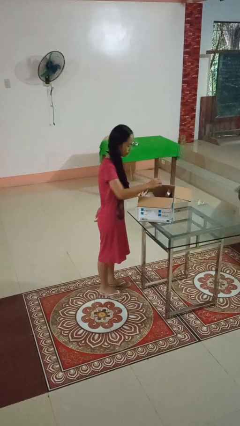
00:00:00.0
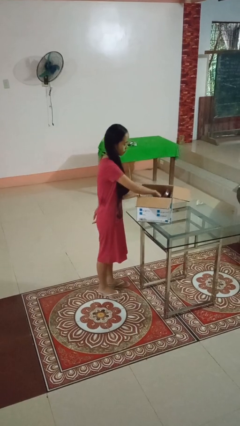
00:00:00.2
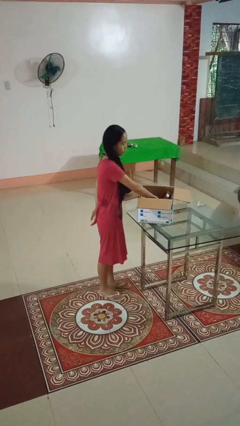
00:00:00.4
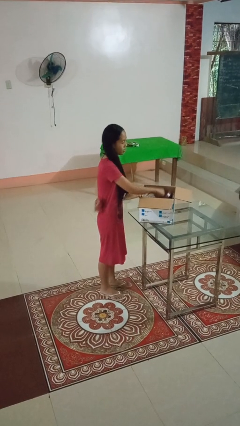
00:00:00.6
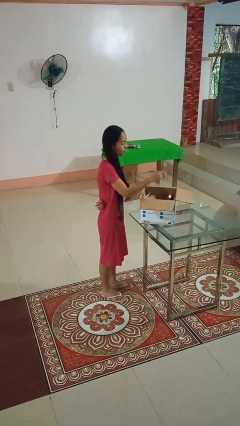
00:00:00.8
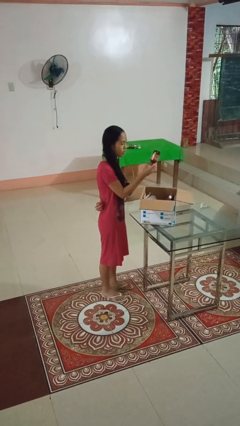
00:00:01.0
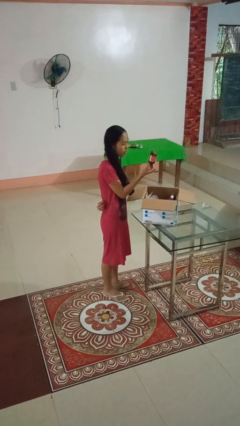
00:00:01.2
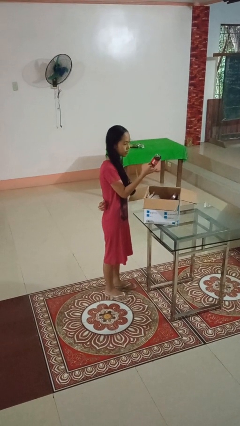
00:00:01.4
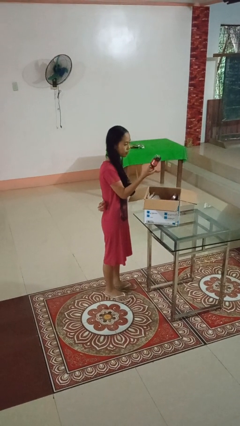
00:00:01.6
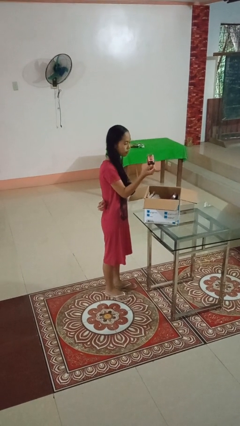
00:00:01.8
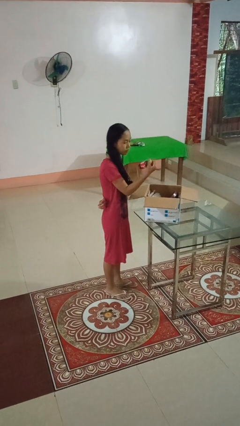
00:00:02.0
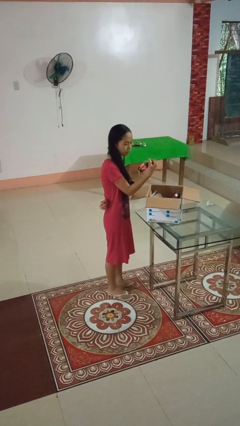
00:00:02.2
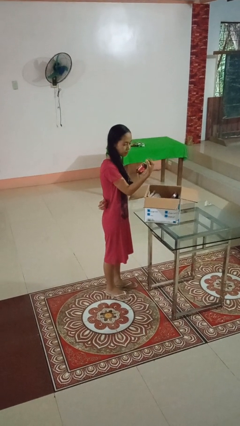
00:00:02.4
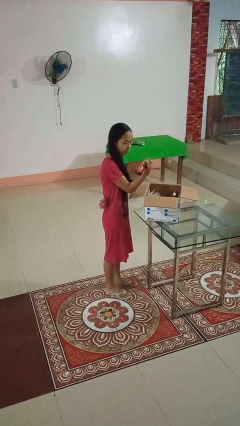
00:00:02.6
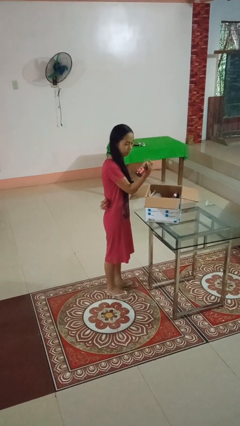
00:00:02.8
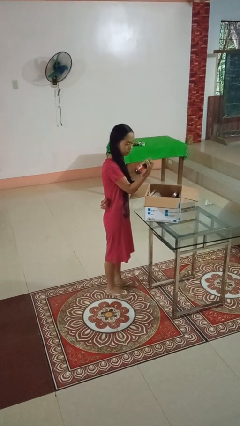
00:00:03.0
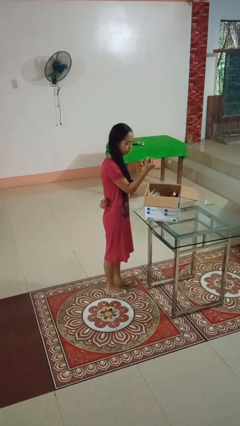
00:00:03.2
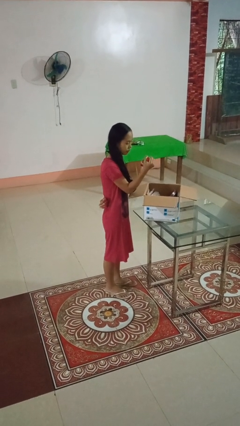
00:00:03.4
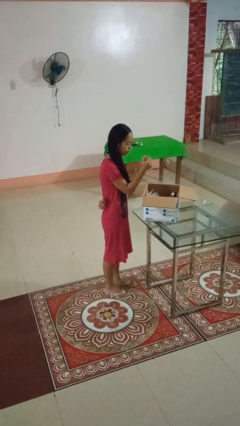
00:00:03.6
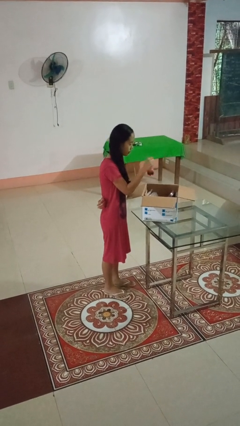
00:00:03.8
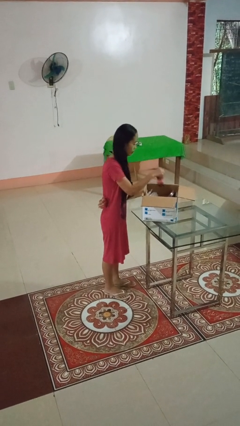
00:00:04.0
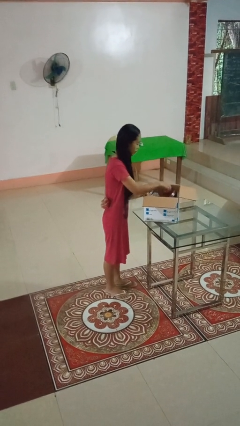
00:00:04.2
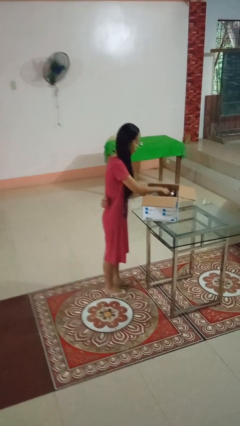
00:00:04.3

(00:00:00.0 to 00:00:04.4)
person takes object from box

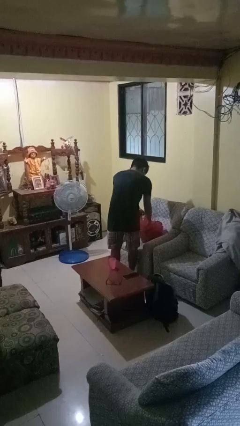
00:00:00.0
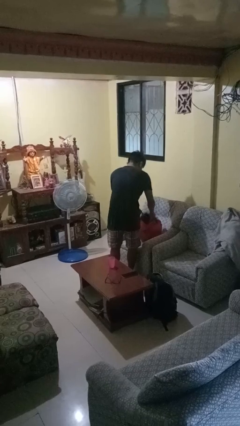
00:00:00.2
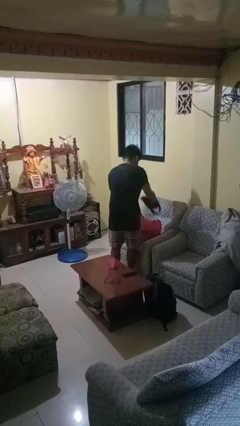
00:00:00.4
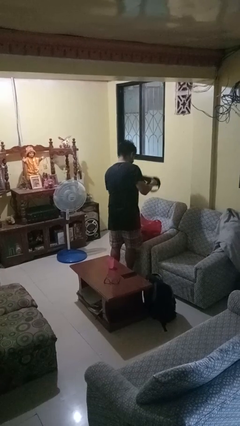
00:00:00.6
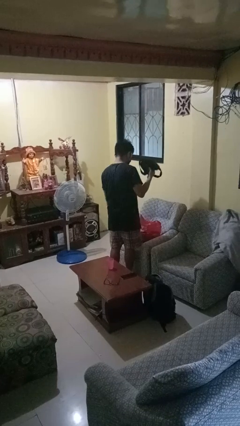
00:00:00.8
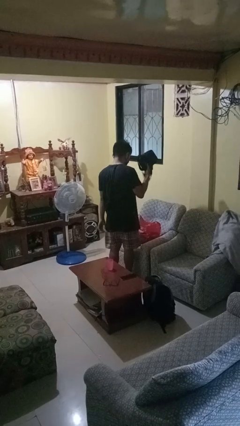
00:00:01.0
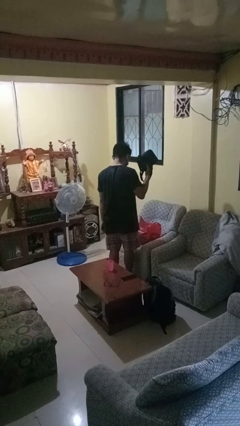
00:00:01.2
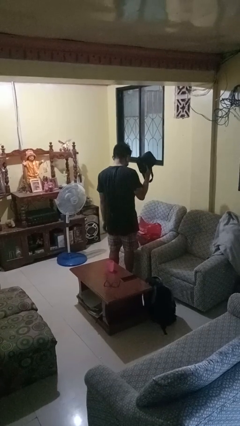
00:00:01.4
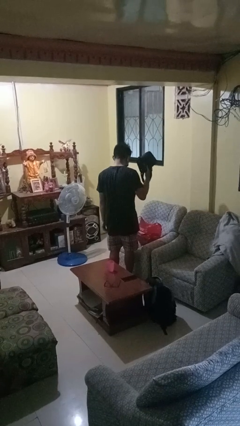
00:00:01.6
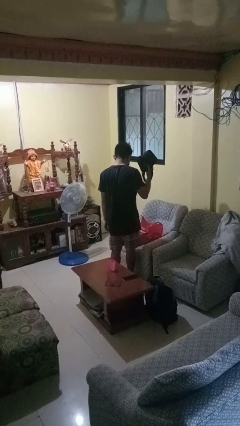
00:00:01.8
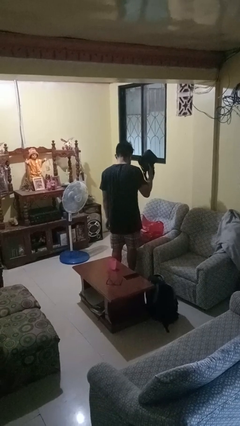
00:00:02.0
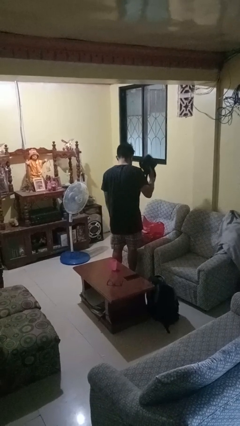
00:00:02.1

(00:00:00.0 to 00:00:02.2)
person takes object from bag

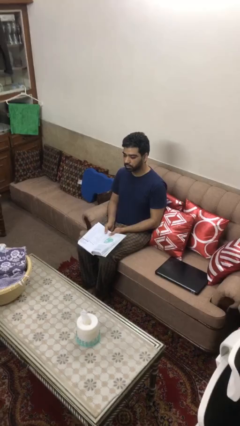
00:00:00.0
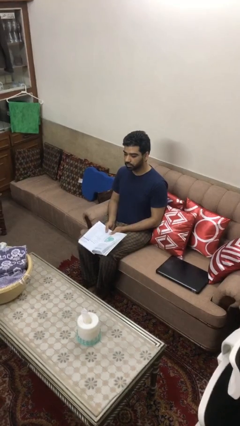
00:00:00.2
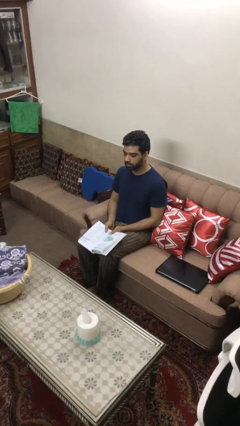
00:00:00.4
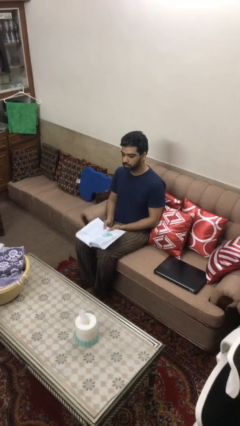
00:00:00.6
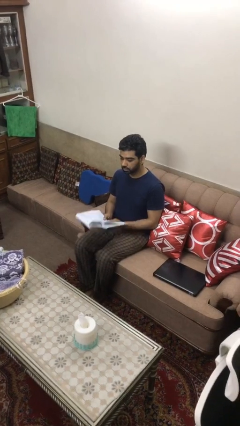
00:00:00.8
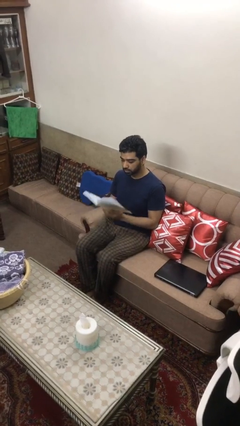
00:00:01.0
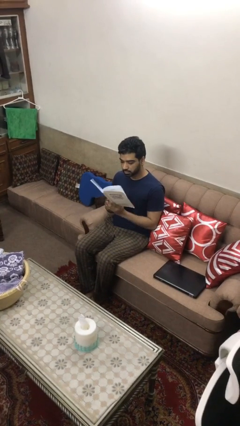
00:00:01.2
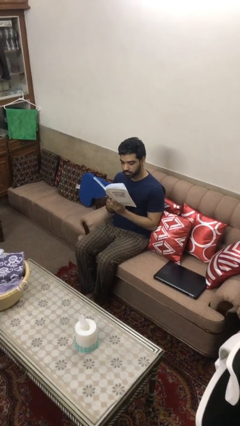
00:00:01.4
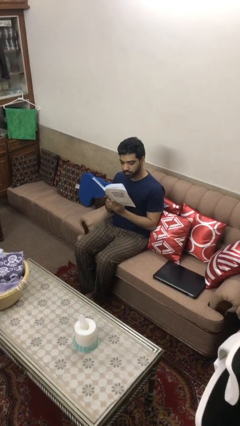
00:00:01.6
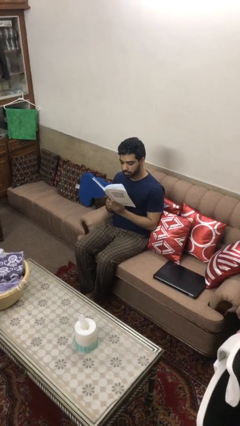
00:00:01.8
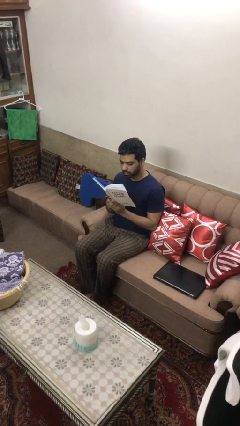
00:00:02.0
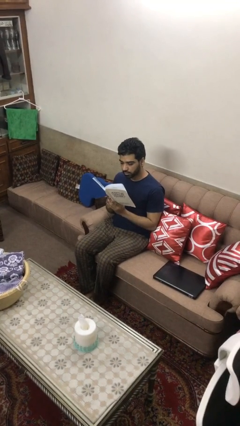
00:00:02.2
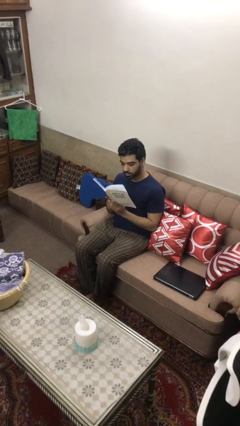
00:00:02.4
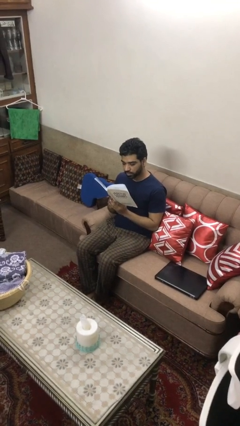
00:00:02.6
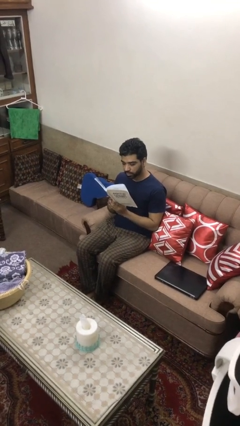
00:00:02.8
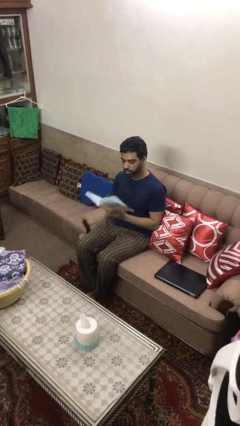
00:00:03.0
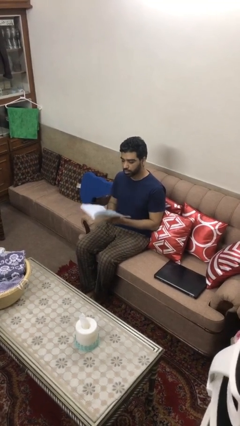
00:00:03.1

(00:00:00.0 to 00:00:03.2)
person reads document

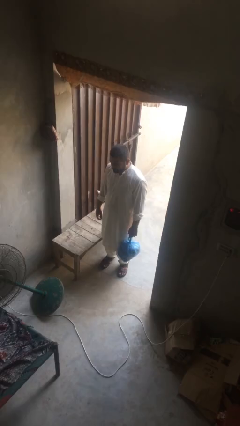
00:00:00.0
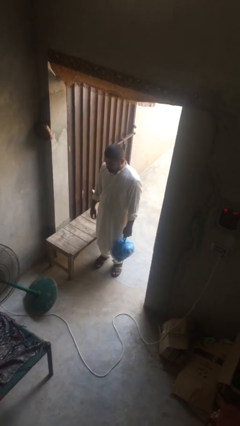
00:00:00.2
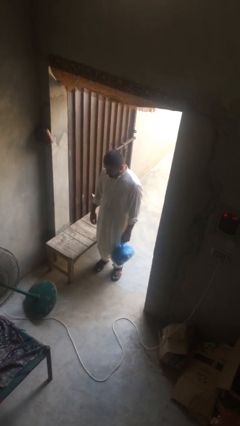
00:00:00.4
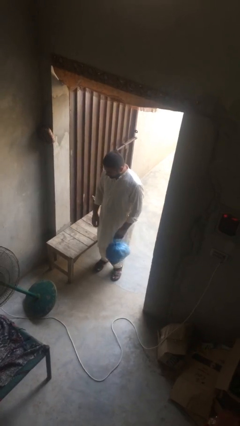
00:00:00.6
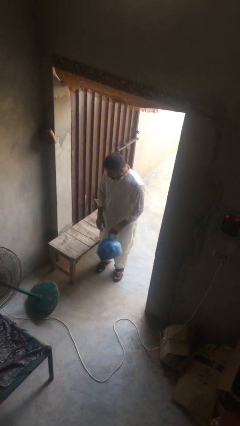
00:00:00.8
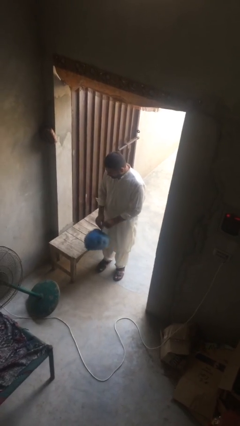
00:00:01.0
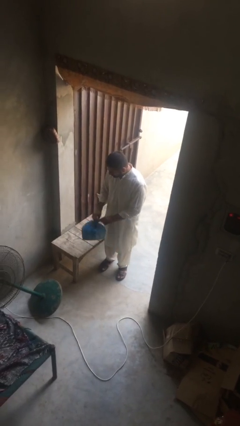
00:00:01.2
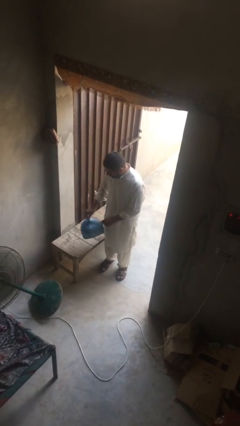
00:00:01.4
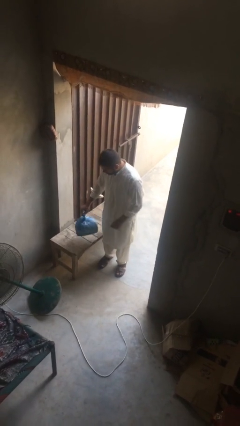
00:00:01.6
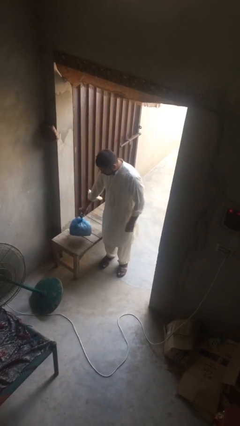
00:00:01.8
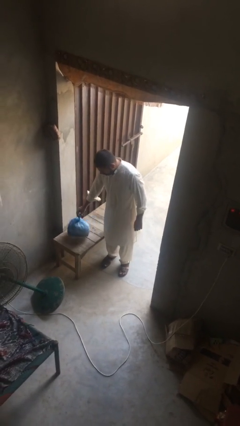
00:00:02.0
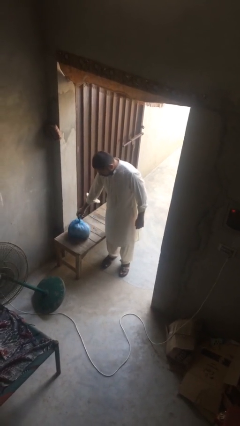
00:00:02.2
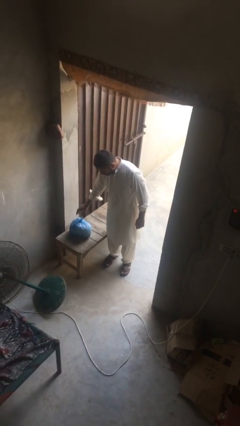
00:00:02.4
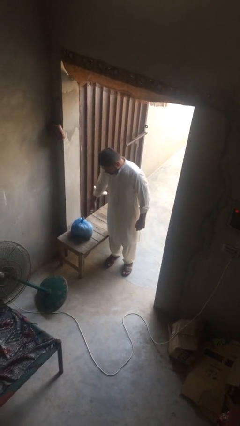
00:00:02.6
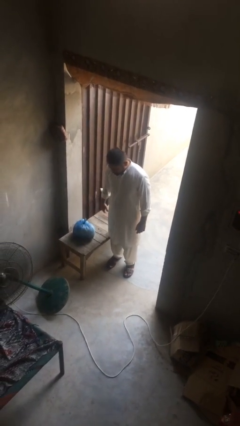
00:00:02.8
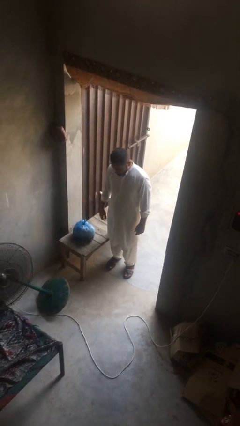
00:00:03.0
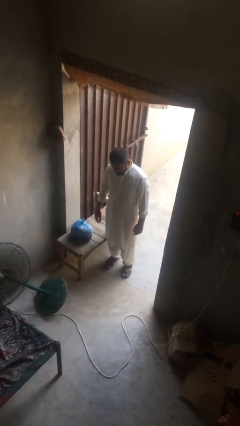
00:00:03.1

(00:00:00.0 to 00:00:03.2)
person puts down object on table

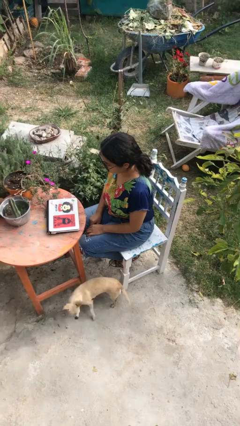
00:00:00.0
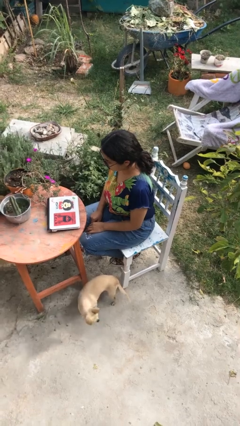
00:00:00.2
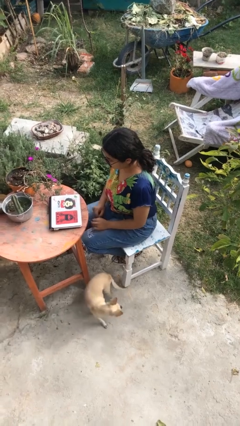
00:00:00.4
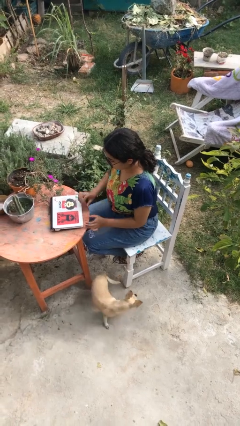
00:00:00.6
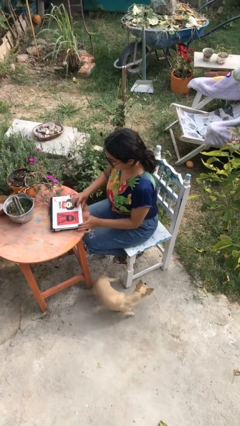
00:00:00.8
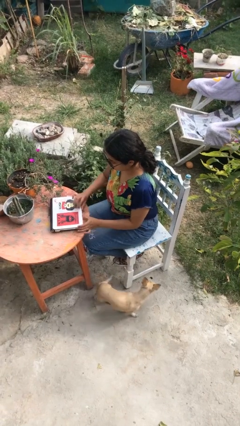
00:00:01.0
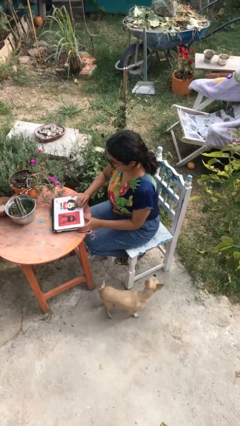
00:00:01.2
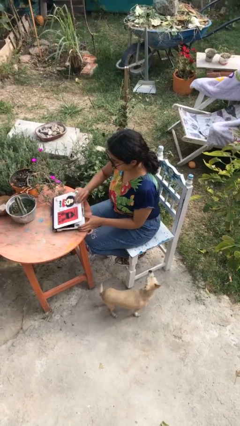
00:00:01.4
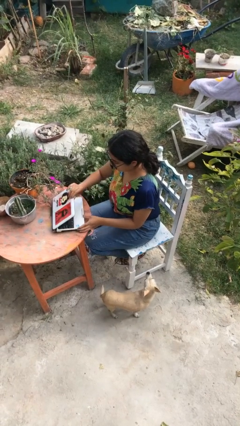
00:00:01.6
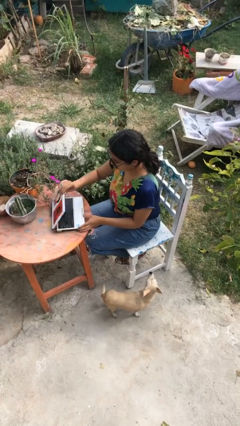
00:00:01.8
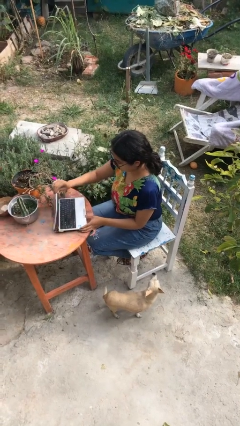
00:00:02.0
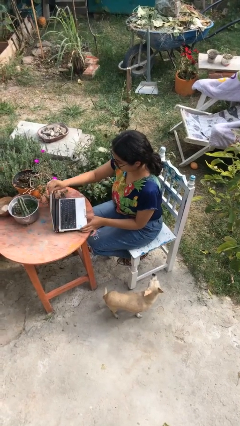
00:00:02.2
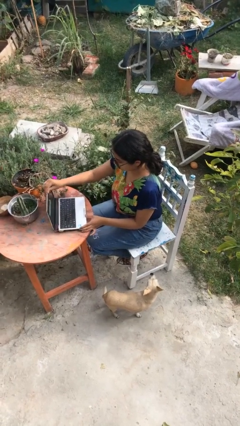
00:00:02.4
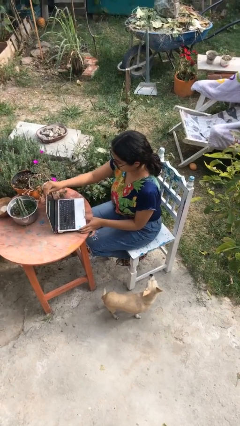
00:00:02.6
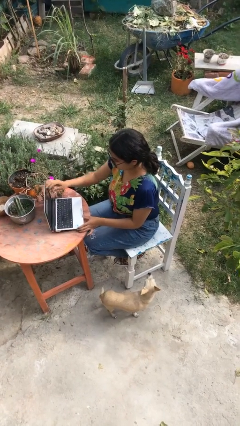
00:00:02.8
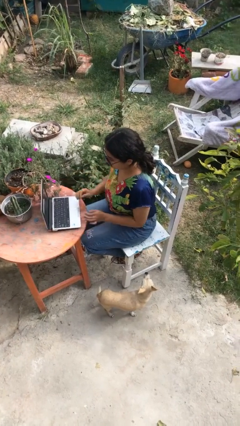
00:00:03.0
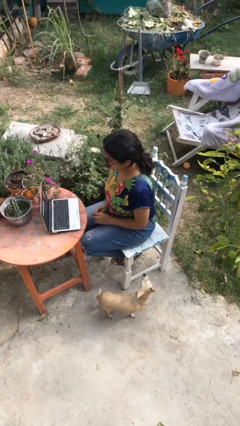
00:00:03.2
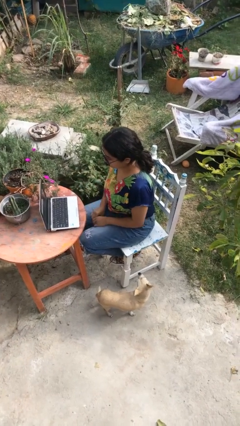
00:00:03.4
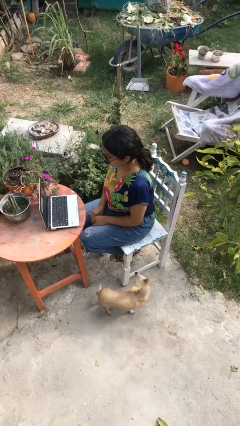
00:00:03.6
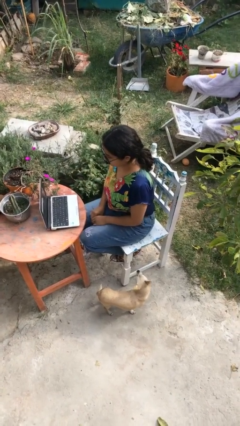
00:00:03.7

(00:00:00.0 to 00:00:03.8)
person opens laptop

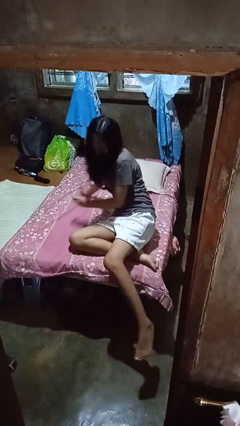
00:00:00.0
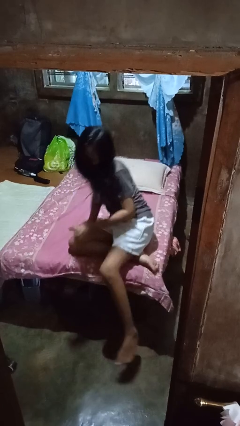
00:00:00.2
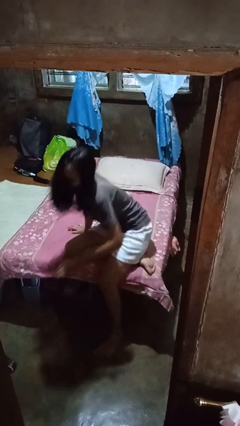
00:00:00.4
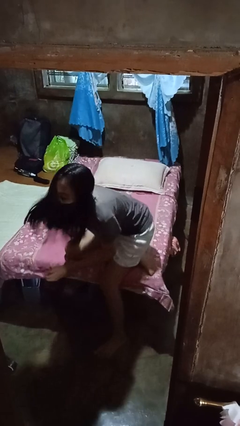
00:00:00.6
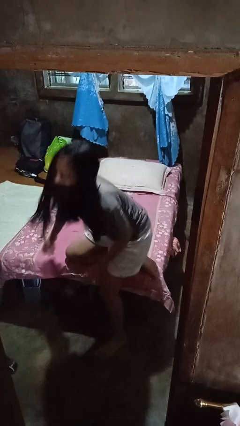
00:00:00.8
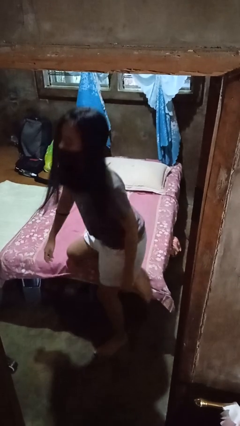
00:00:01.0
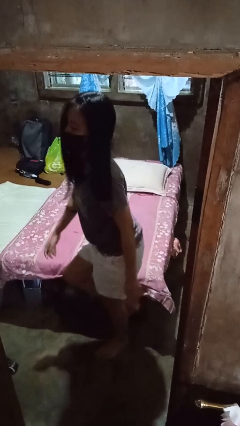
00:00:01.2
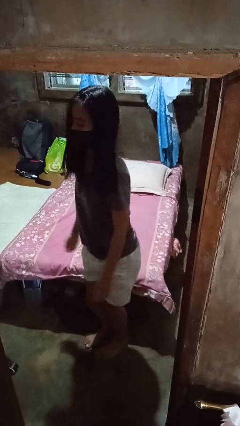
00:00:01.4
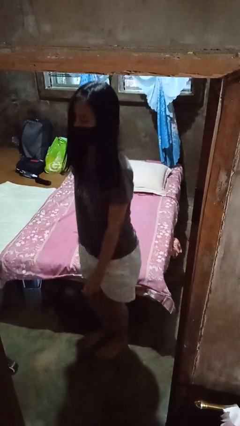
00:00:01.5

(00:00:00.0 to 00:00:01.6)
person stands up
